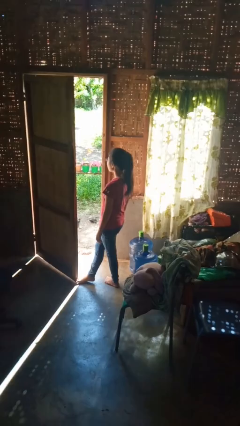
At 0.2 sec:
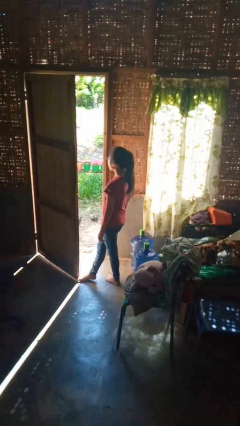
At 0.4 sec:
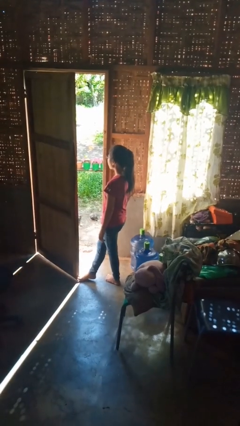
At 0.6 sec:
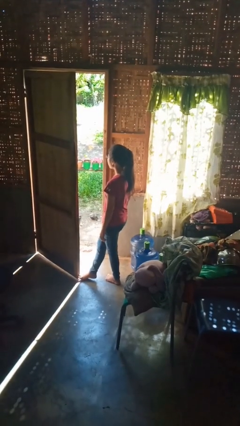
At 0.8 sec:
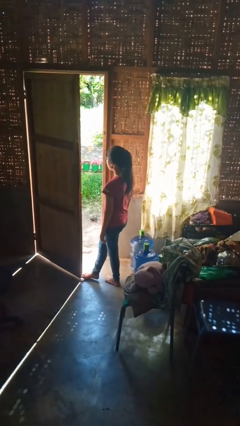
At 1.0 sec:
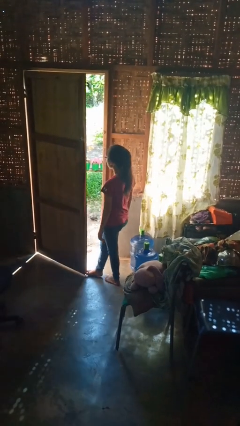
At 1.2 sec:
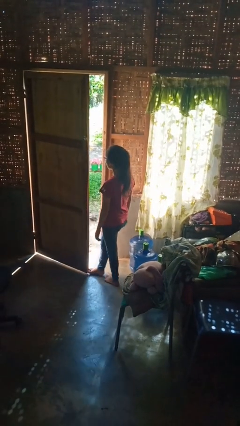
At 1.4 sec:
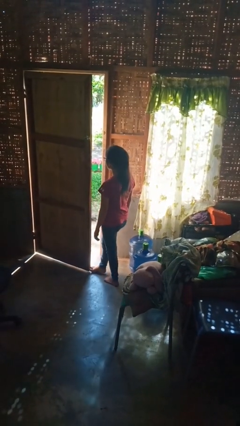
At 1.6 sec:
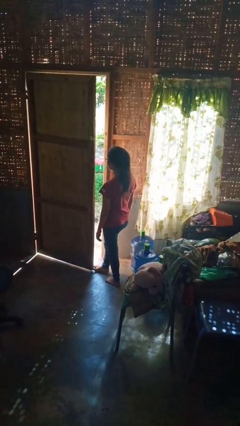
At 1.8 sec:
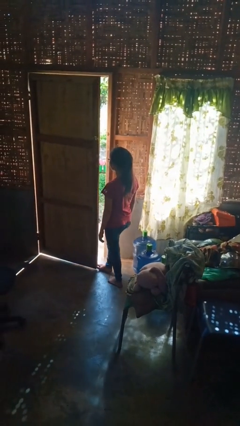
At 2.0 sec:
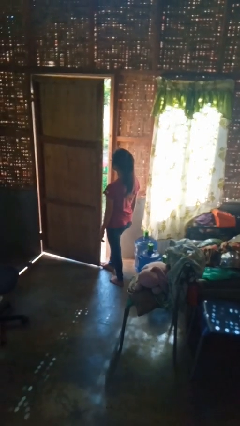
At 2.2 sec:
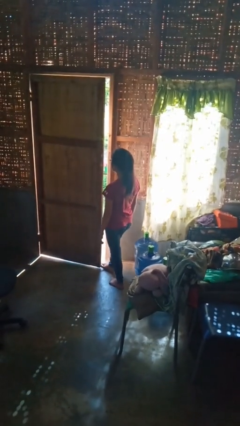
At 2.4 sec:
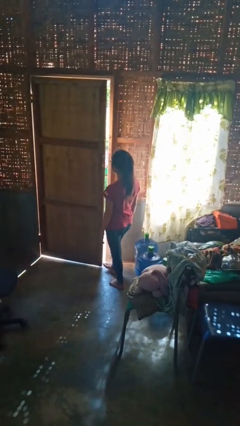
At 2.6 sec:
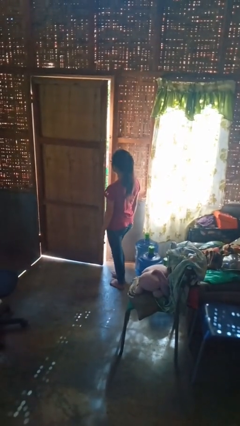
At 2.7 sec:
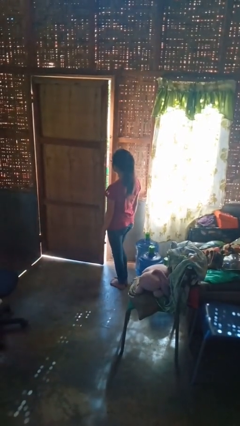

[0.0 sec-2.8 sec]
person closes door with foot

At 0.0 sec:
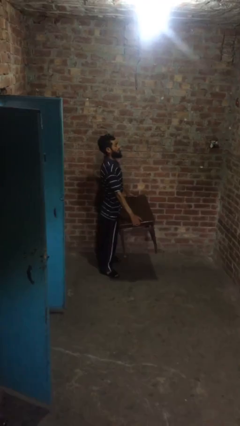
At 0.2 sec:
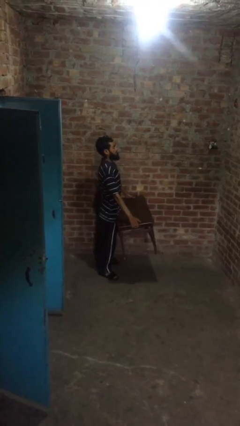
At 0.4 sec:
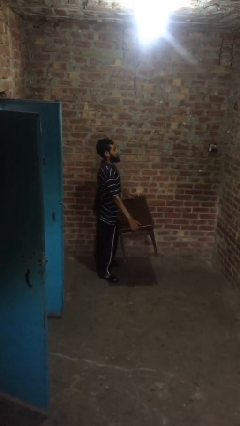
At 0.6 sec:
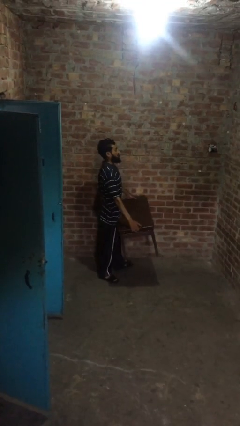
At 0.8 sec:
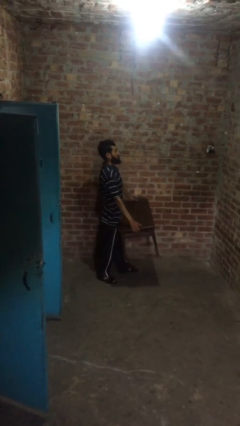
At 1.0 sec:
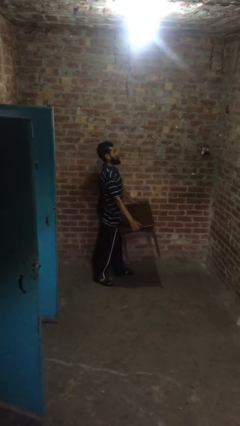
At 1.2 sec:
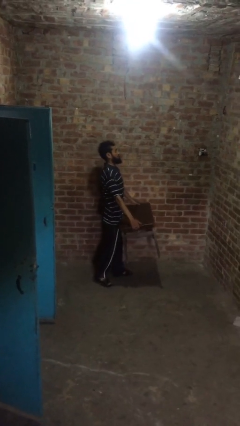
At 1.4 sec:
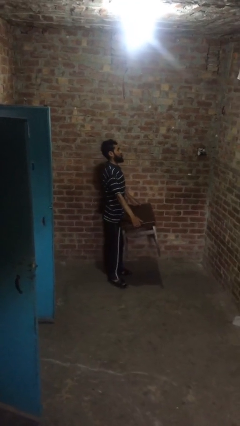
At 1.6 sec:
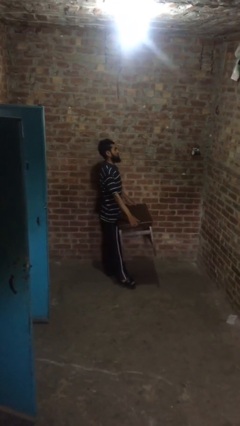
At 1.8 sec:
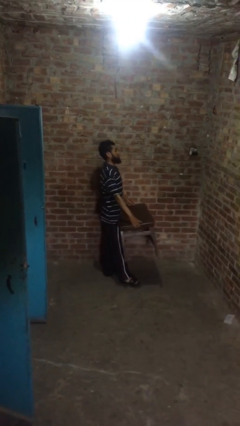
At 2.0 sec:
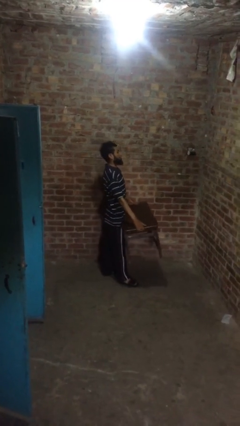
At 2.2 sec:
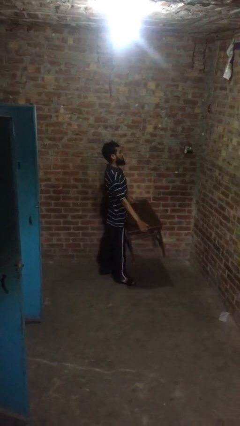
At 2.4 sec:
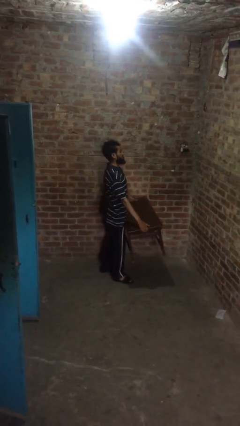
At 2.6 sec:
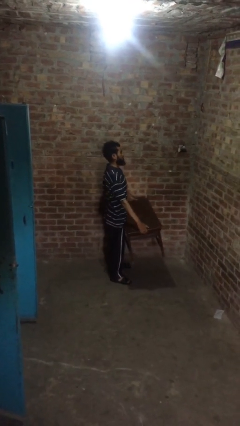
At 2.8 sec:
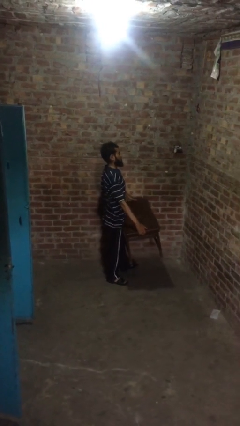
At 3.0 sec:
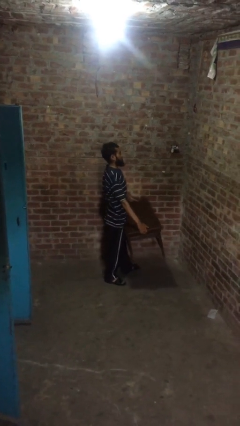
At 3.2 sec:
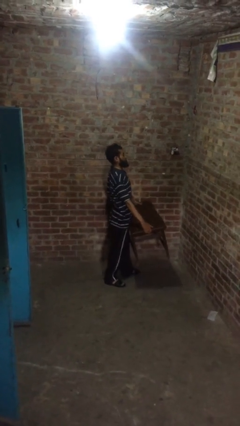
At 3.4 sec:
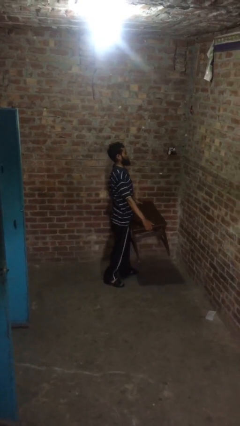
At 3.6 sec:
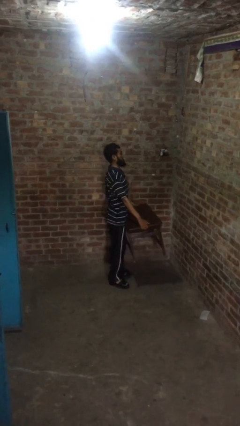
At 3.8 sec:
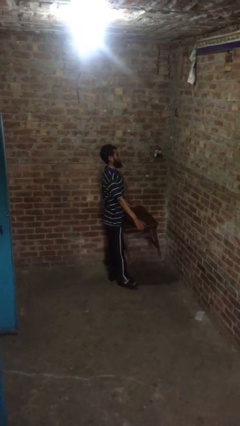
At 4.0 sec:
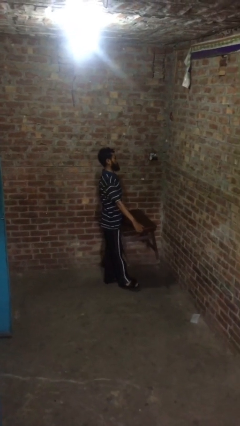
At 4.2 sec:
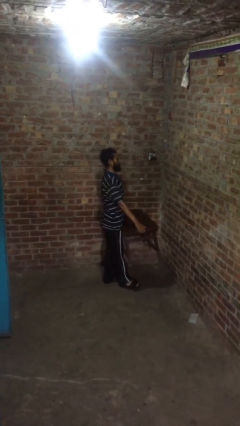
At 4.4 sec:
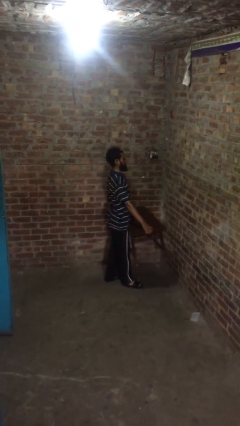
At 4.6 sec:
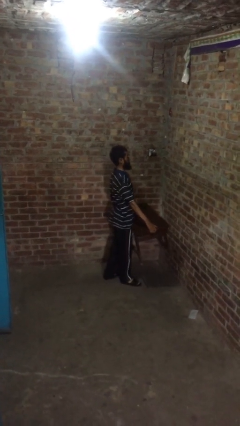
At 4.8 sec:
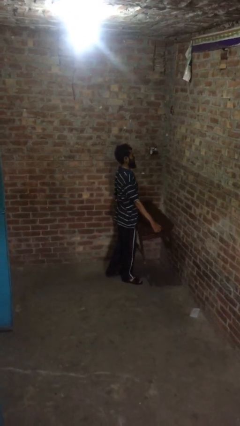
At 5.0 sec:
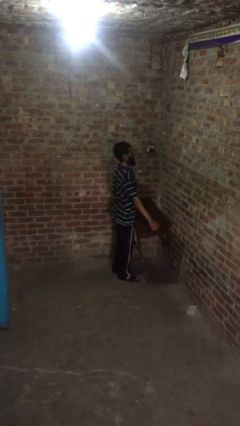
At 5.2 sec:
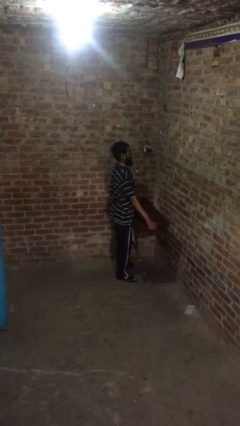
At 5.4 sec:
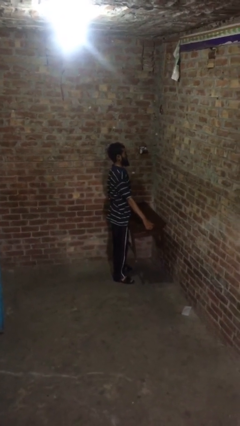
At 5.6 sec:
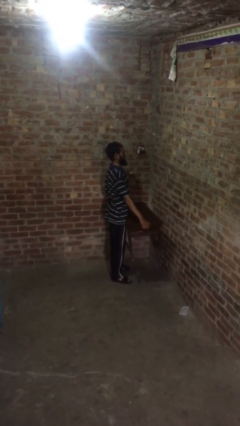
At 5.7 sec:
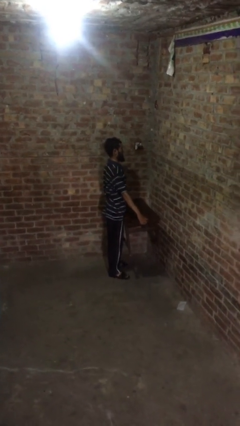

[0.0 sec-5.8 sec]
person carries heavy object

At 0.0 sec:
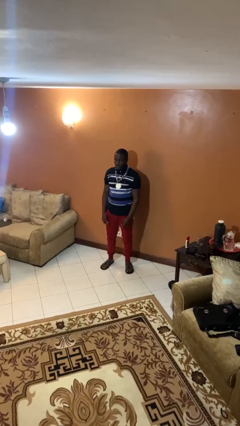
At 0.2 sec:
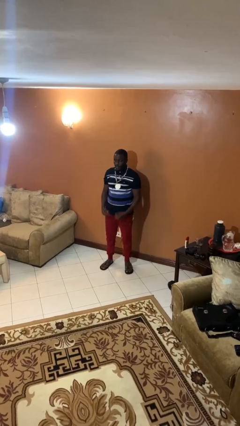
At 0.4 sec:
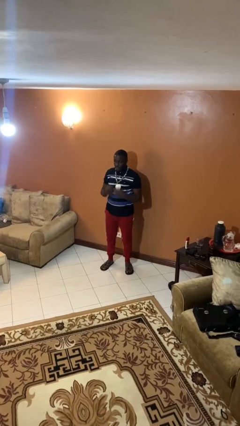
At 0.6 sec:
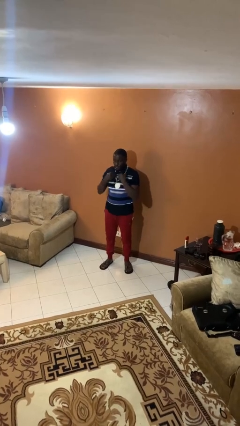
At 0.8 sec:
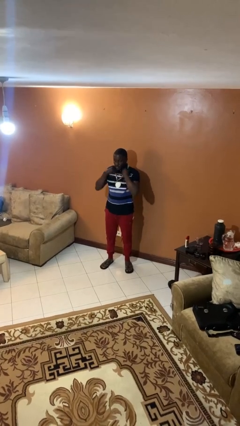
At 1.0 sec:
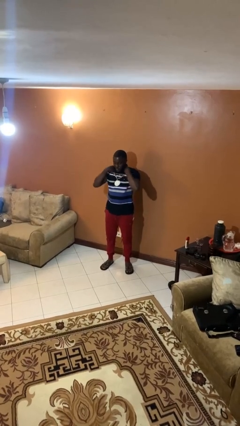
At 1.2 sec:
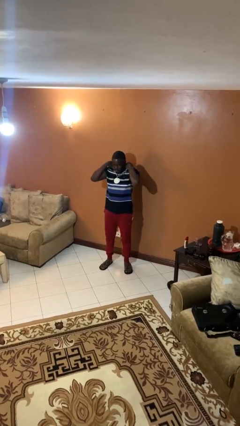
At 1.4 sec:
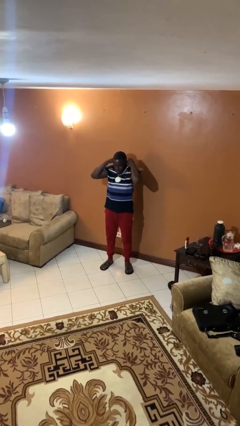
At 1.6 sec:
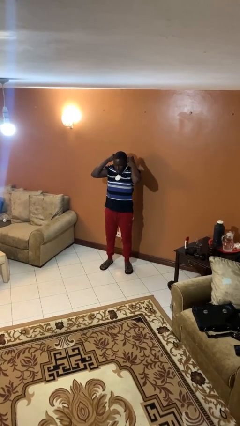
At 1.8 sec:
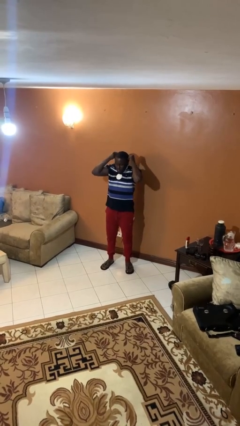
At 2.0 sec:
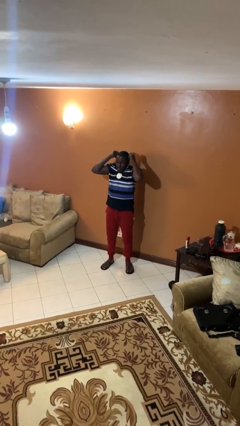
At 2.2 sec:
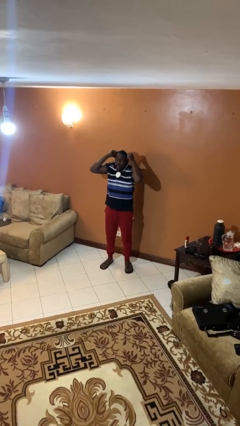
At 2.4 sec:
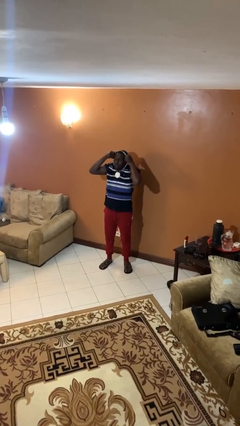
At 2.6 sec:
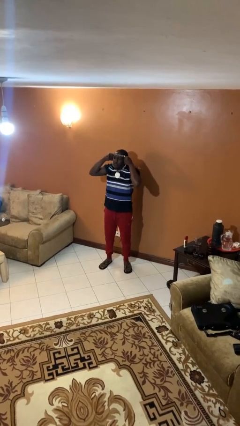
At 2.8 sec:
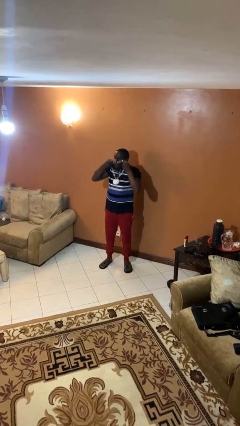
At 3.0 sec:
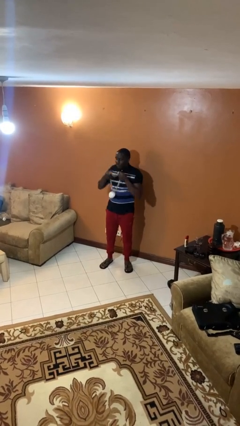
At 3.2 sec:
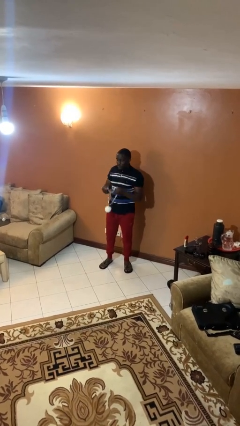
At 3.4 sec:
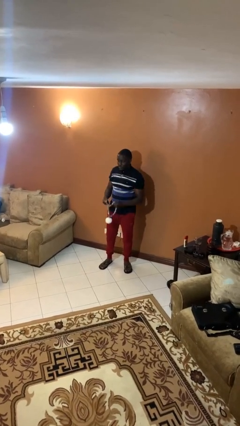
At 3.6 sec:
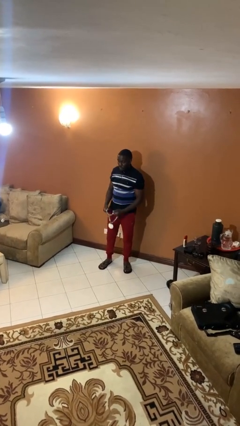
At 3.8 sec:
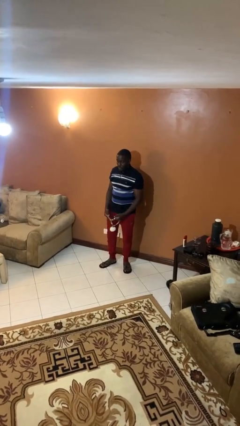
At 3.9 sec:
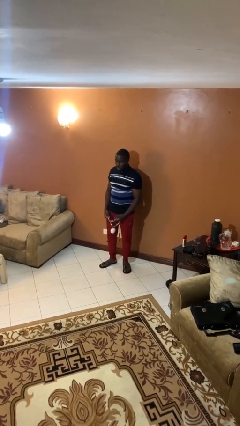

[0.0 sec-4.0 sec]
person takes off necklace

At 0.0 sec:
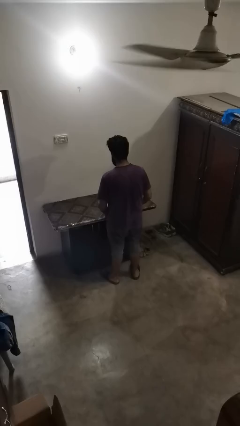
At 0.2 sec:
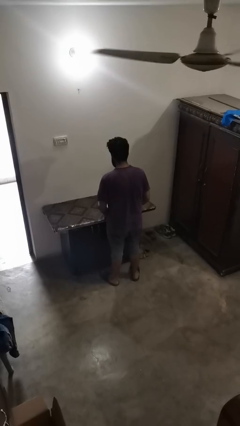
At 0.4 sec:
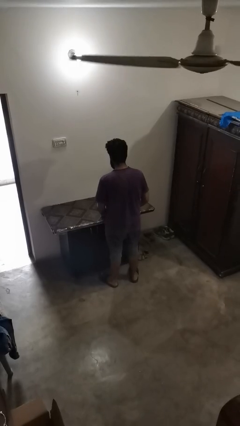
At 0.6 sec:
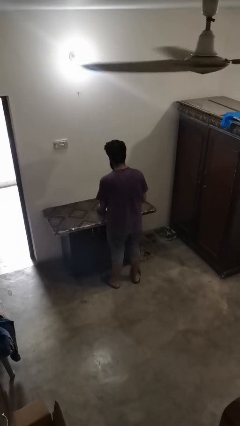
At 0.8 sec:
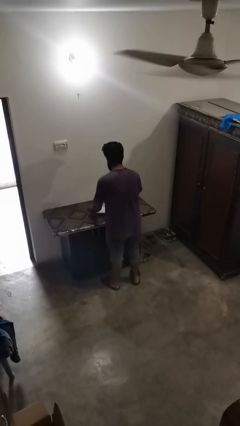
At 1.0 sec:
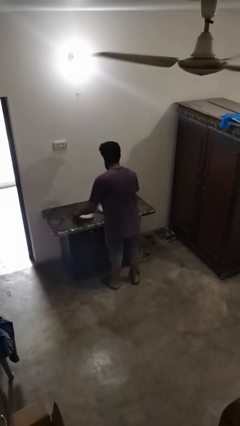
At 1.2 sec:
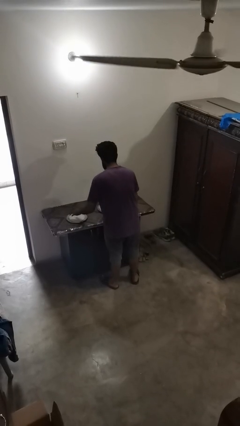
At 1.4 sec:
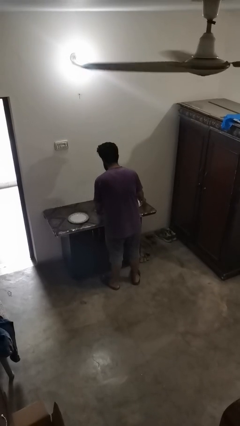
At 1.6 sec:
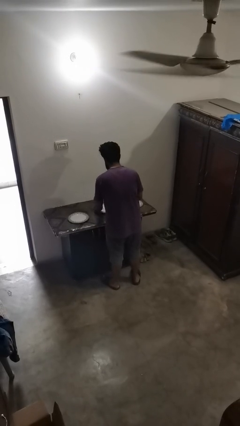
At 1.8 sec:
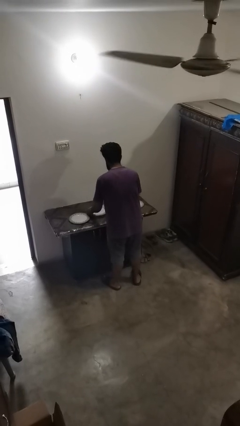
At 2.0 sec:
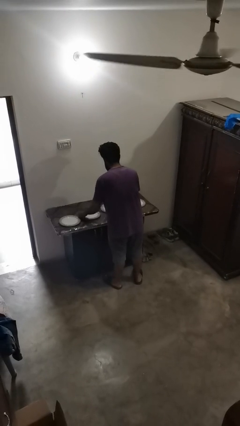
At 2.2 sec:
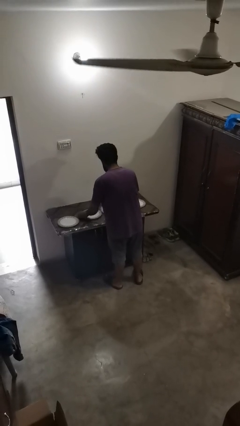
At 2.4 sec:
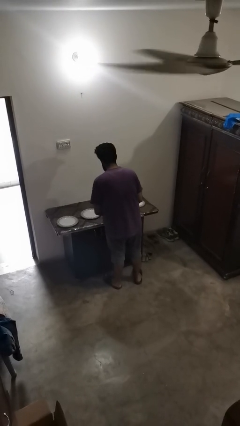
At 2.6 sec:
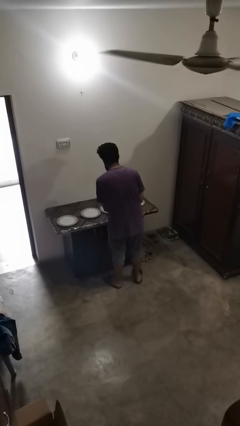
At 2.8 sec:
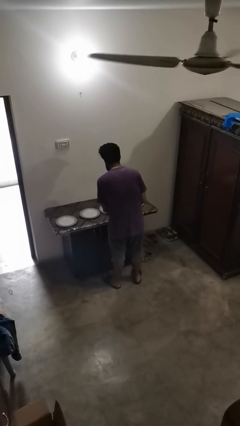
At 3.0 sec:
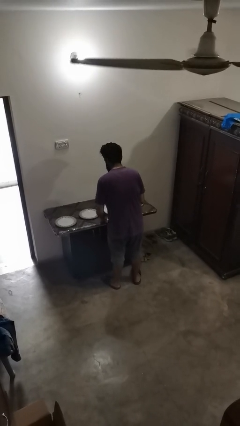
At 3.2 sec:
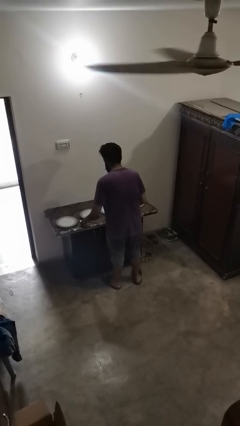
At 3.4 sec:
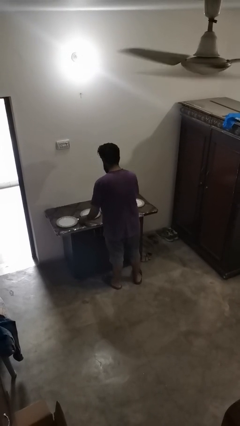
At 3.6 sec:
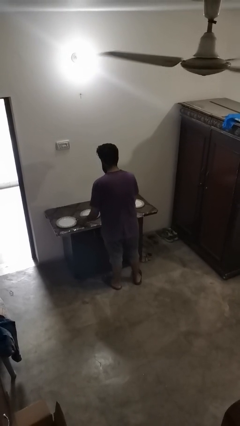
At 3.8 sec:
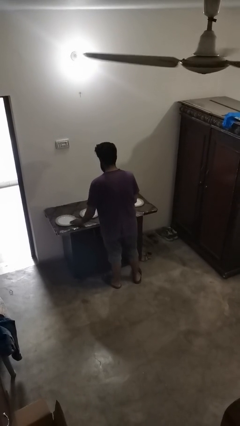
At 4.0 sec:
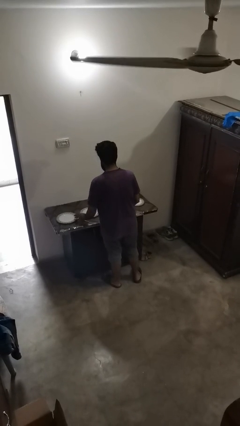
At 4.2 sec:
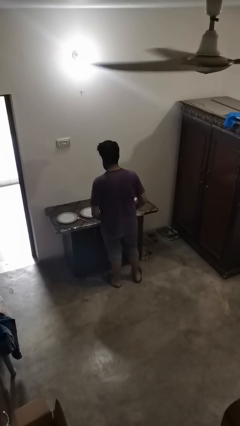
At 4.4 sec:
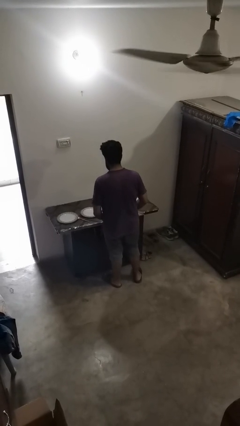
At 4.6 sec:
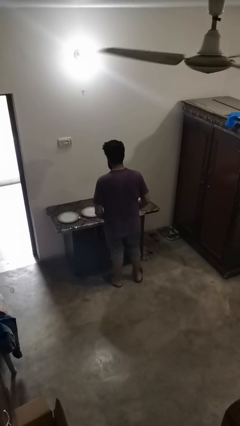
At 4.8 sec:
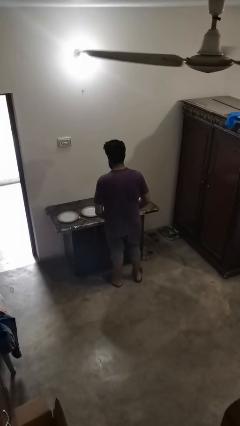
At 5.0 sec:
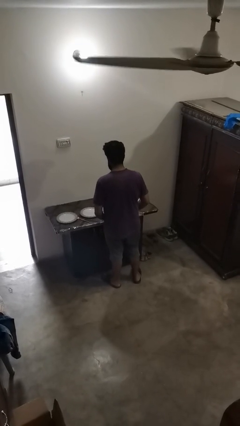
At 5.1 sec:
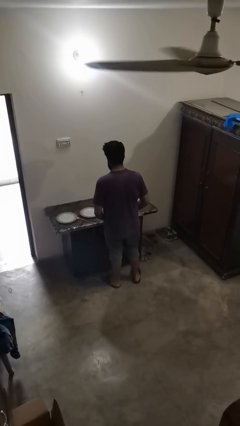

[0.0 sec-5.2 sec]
person sets table
